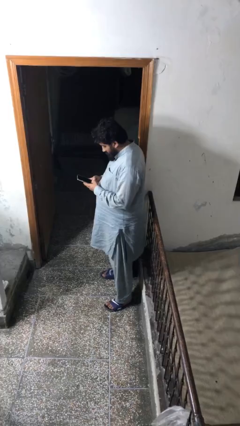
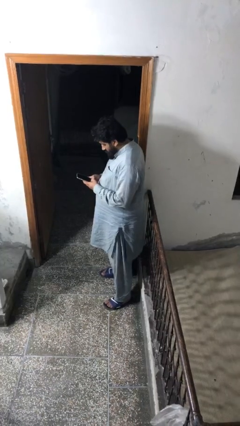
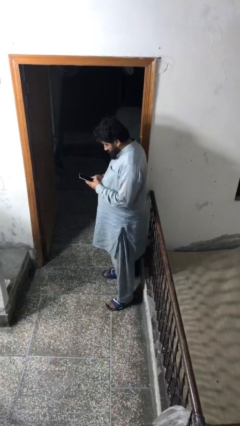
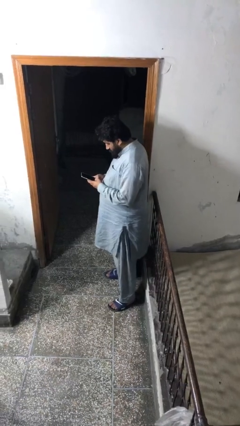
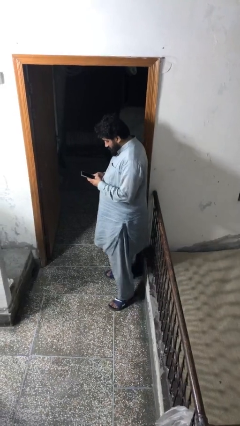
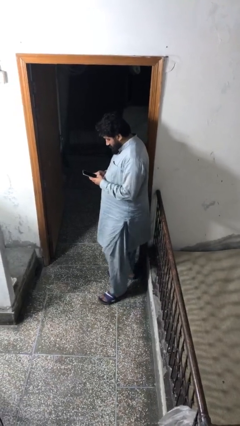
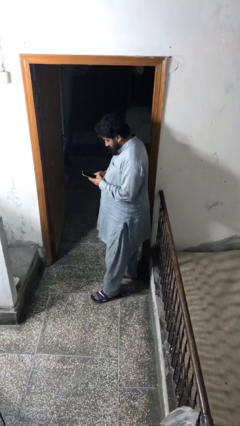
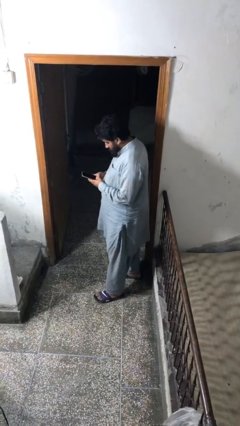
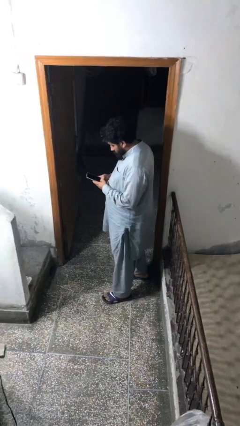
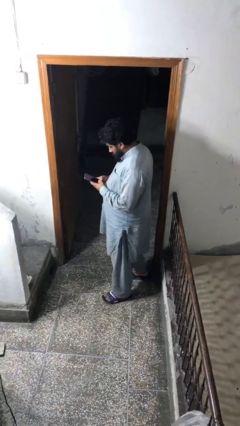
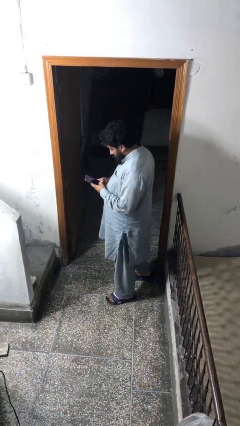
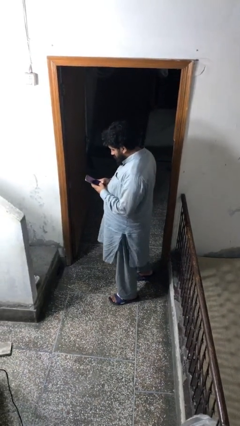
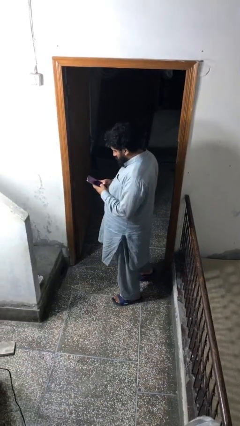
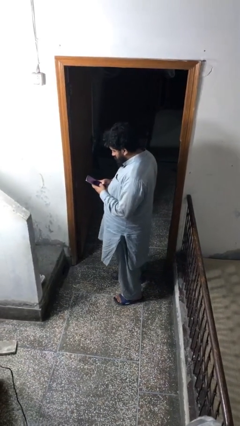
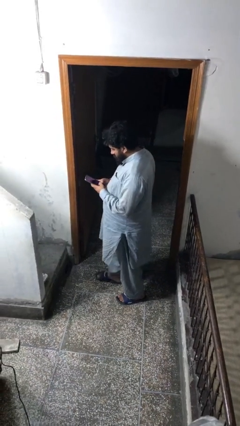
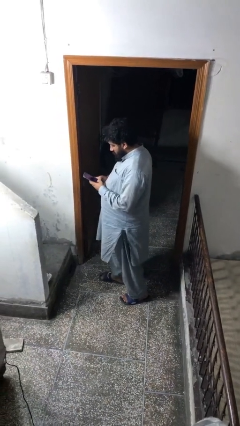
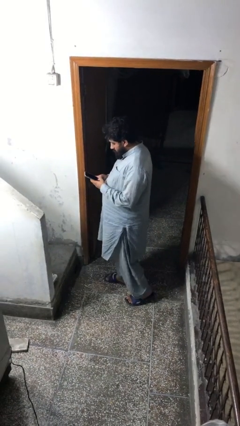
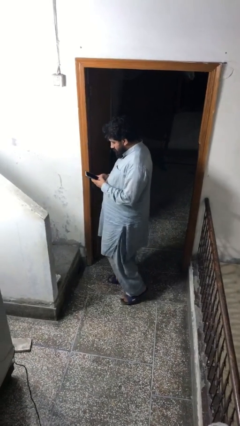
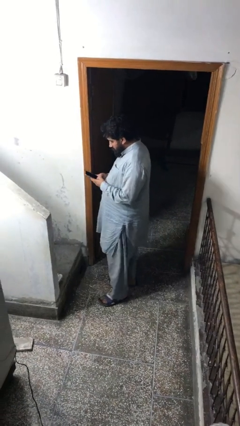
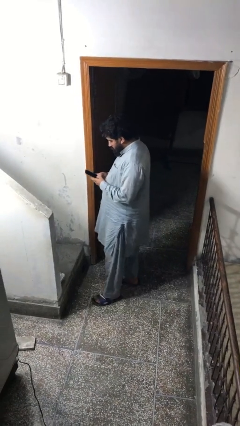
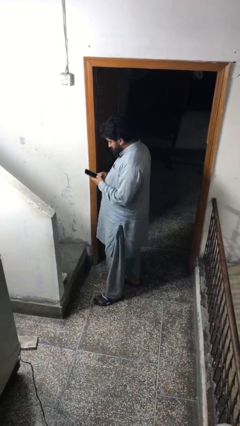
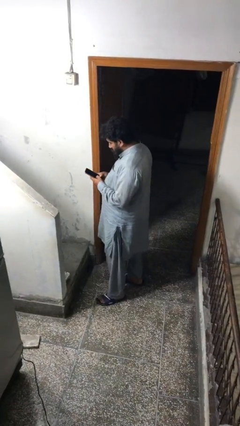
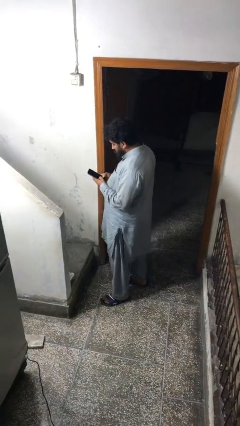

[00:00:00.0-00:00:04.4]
person texts on phone

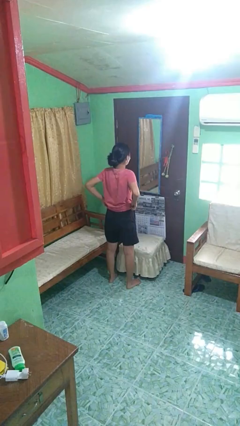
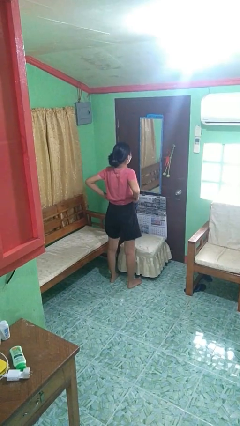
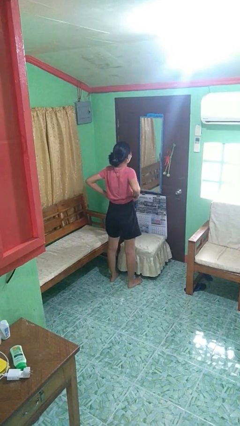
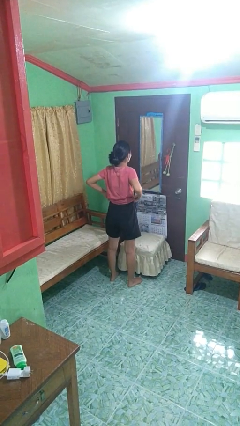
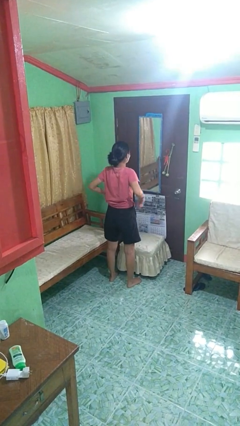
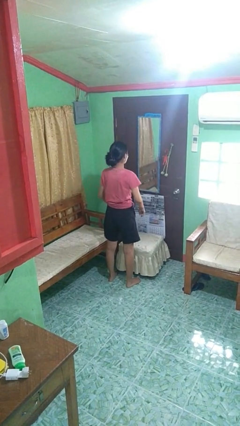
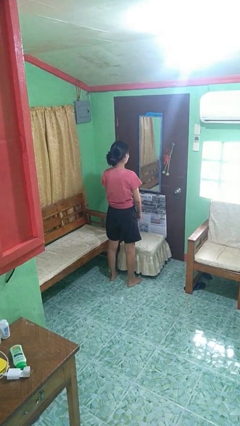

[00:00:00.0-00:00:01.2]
person hikes up pants

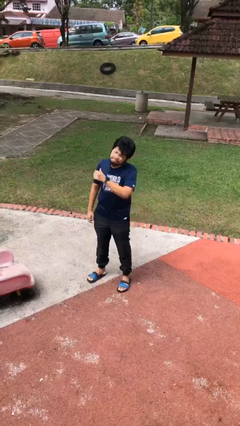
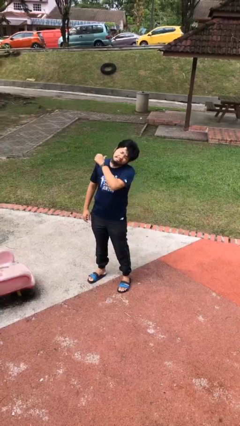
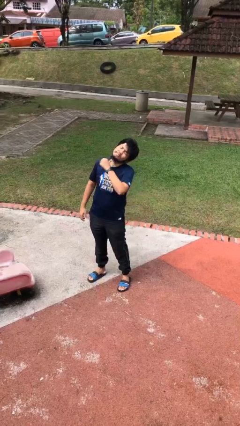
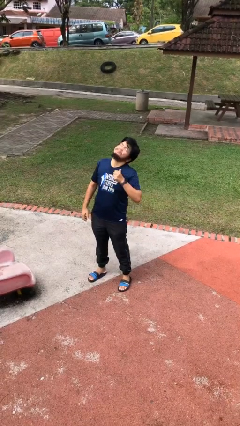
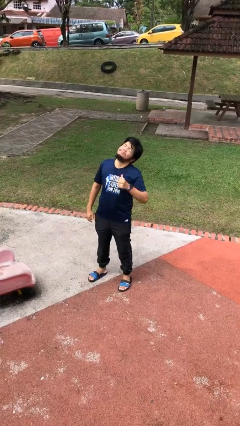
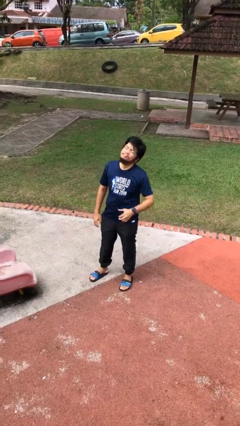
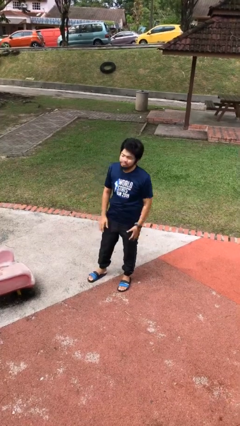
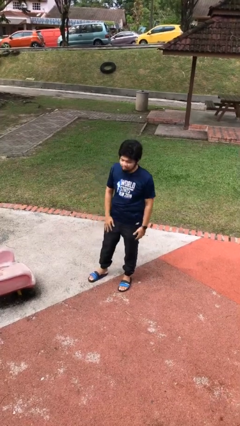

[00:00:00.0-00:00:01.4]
person gestures cut

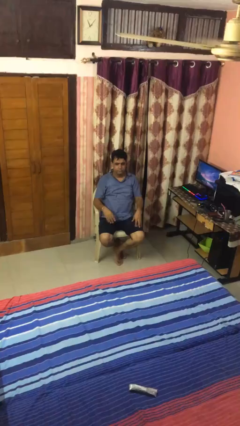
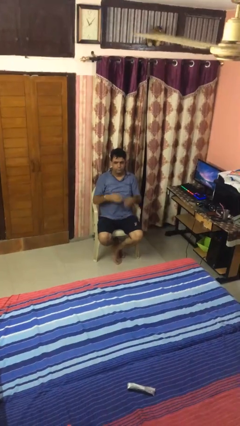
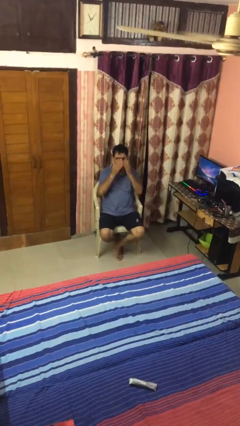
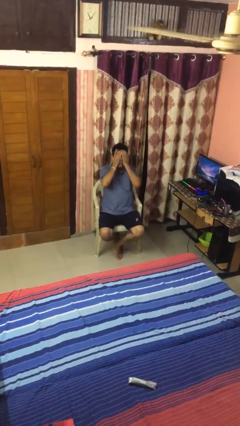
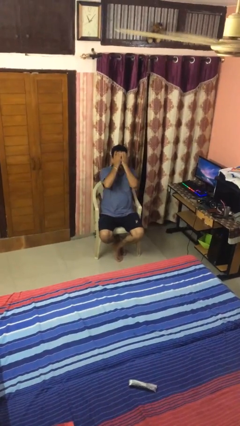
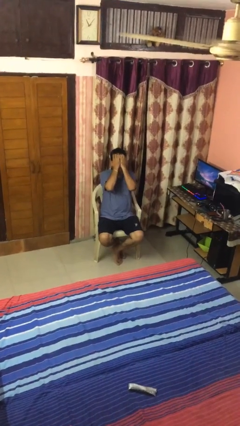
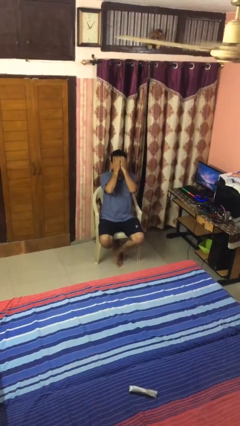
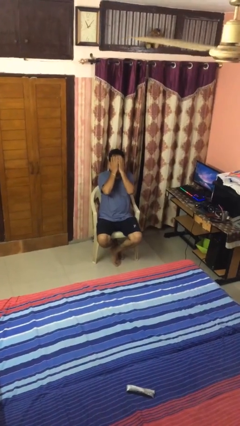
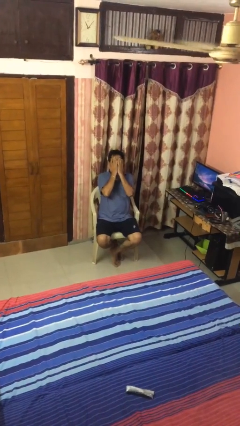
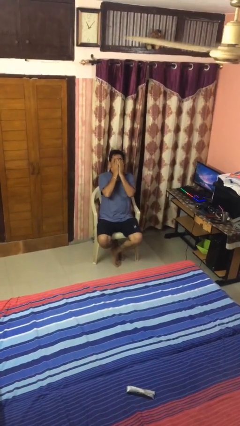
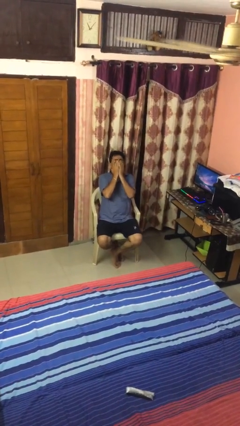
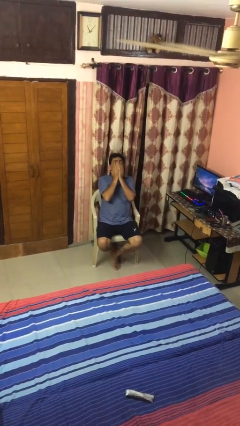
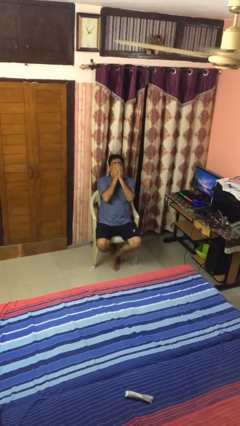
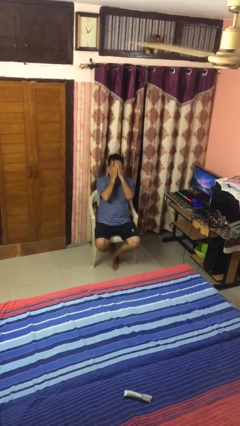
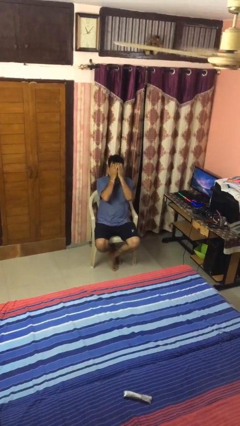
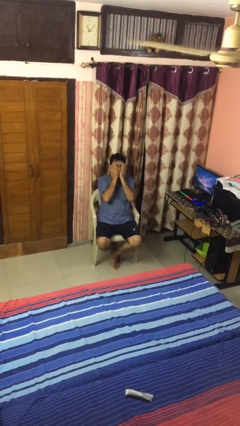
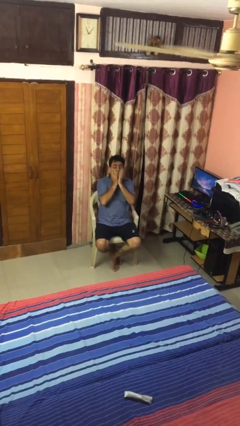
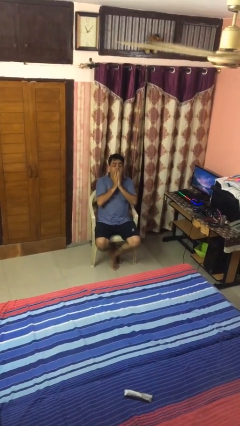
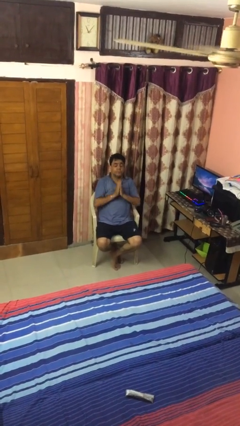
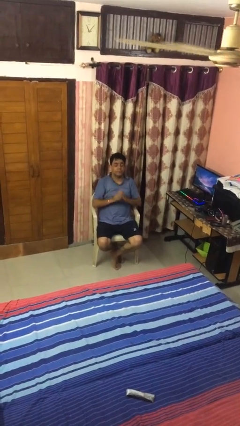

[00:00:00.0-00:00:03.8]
person covers face with hands

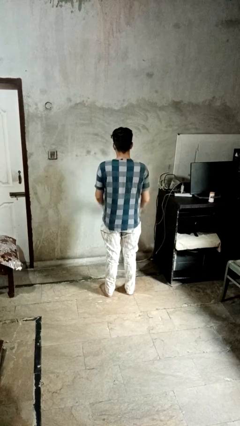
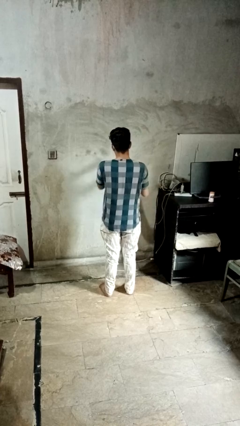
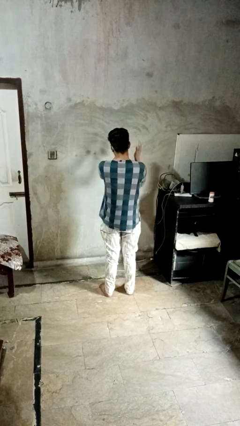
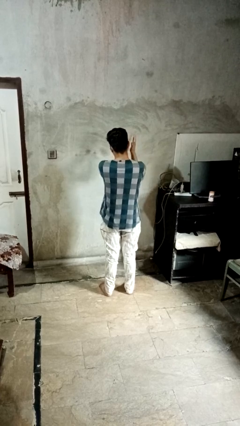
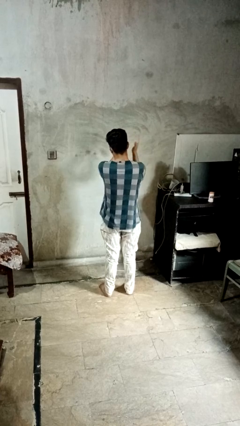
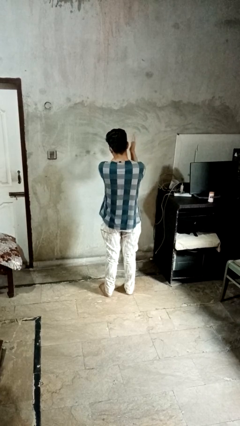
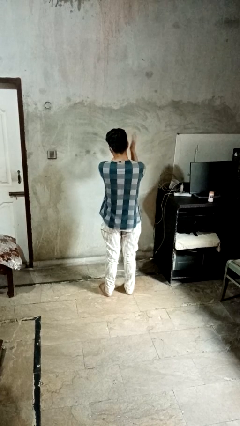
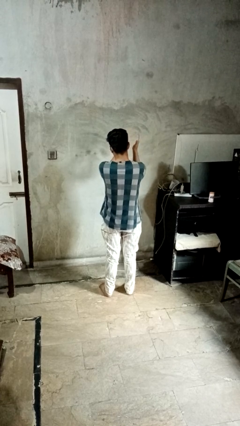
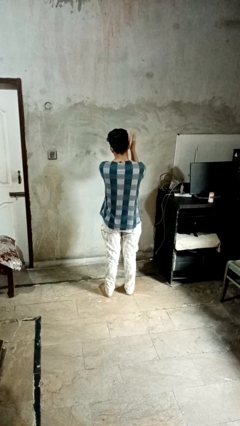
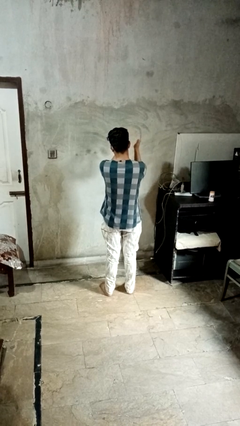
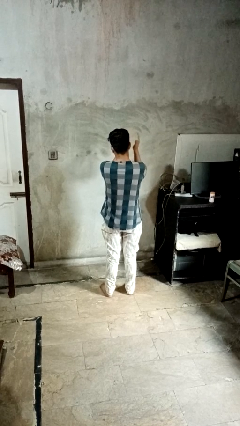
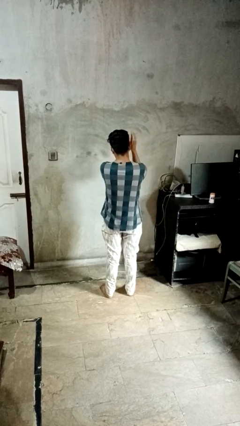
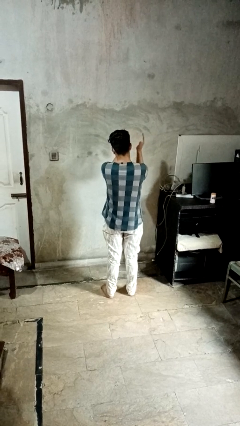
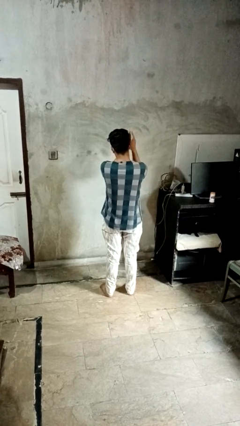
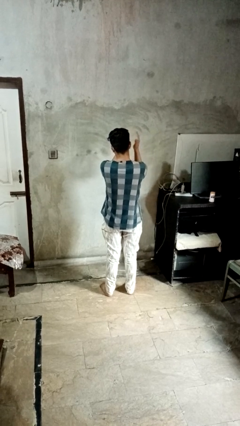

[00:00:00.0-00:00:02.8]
person claps hands

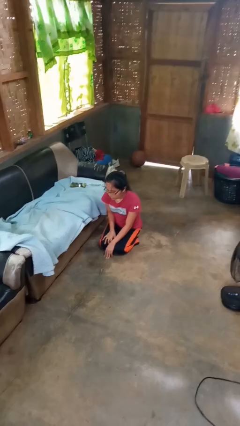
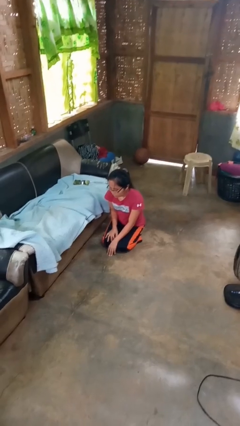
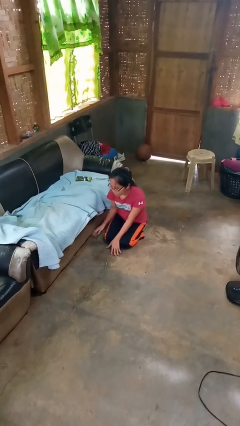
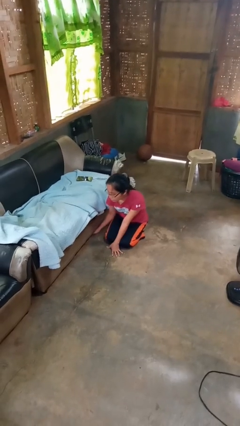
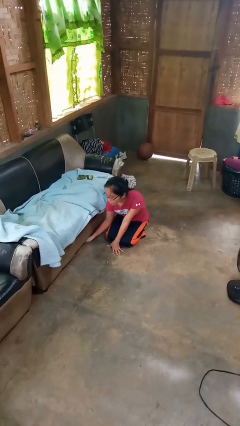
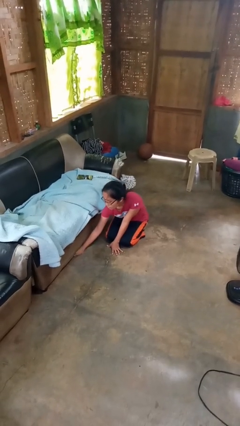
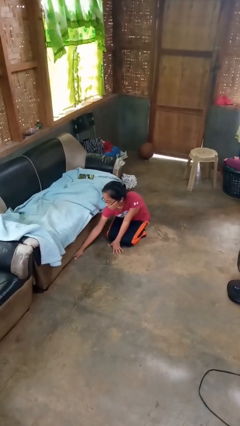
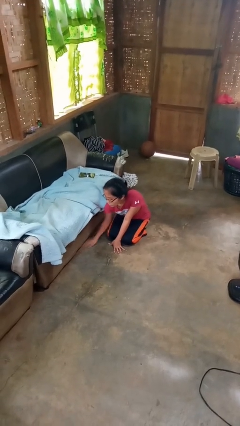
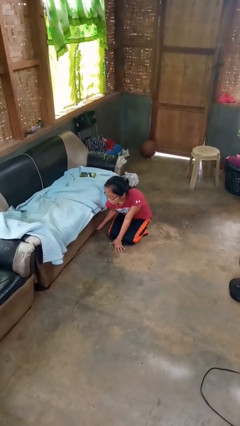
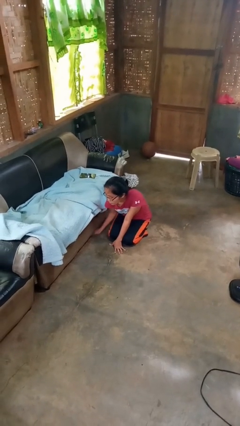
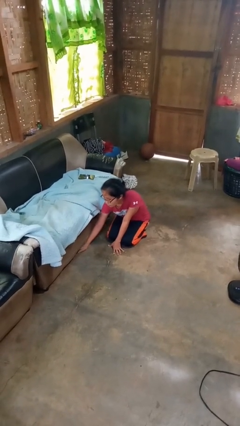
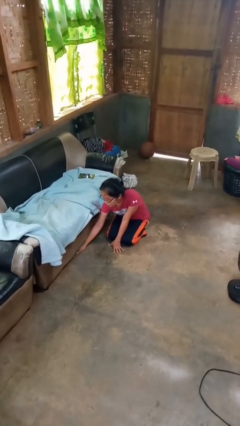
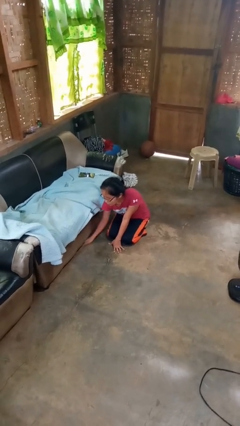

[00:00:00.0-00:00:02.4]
person searches under couch

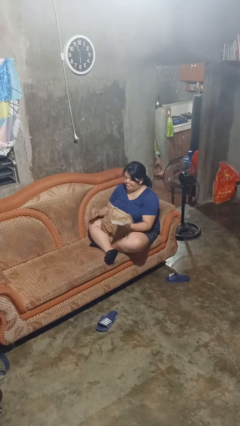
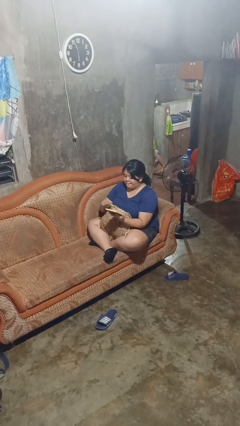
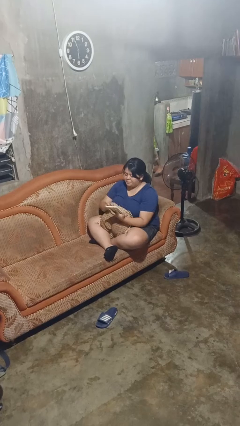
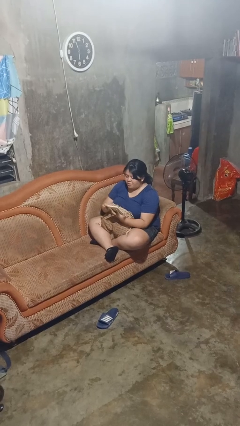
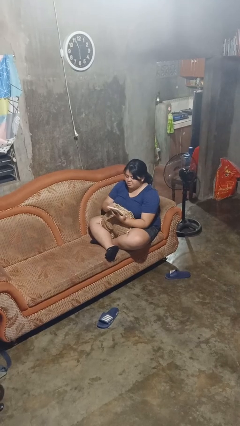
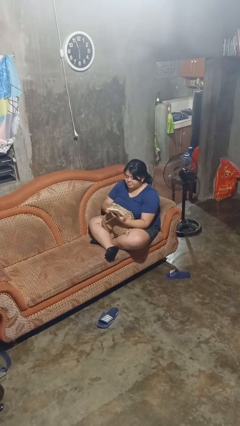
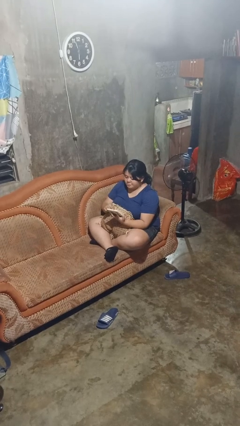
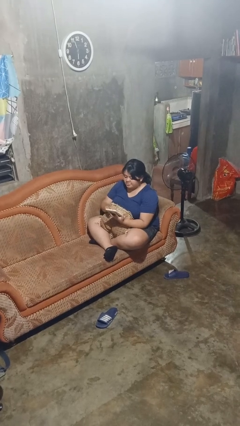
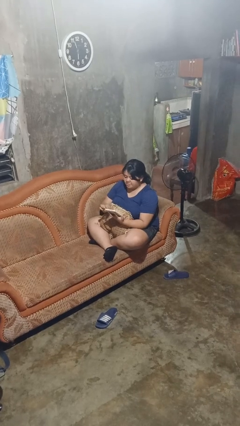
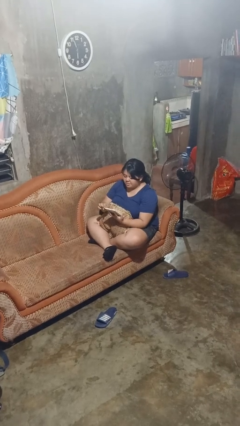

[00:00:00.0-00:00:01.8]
person interacts with tablet
